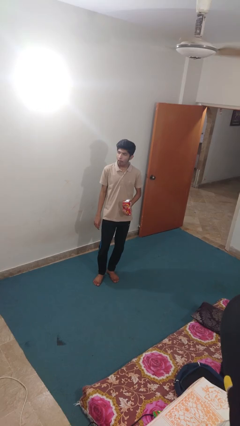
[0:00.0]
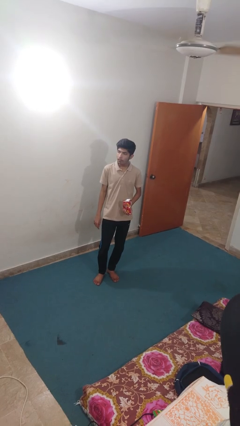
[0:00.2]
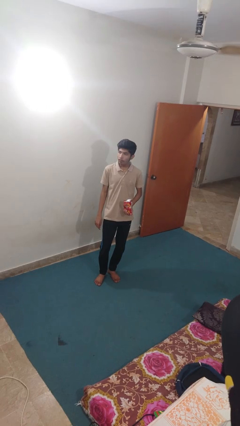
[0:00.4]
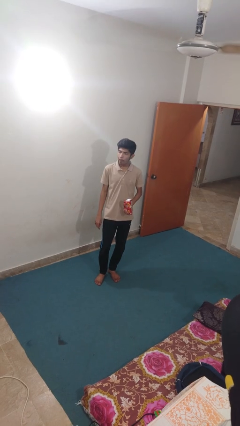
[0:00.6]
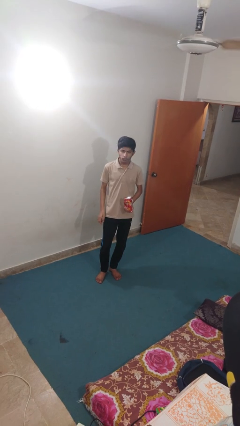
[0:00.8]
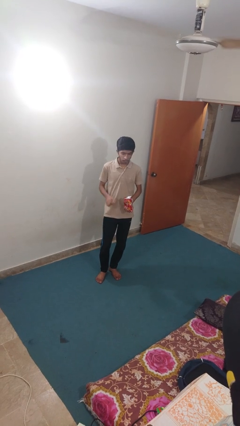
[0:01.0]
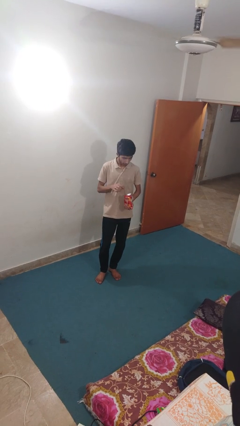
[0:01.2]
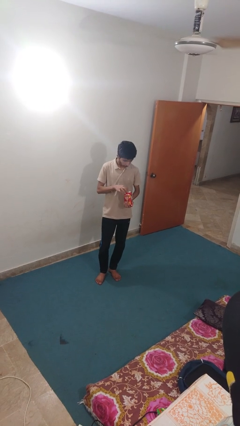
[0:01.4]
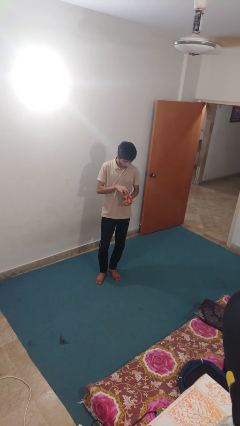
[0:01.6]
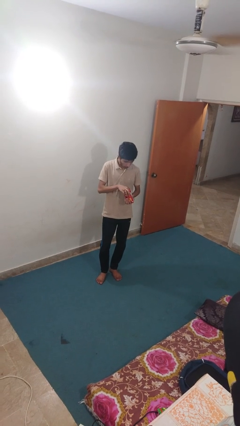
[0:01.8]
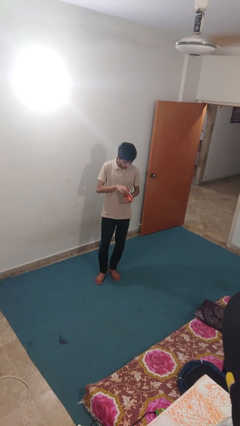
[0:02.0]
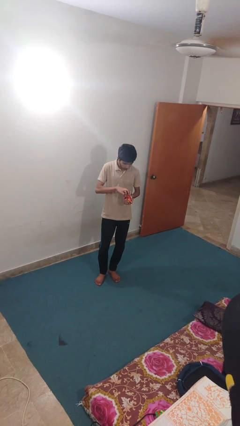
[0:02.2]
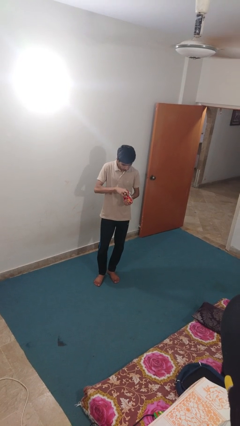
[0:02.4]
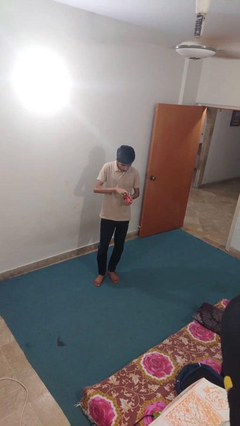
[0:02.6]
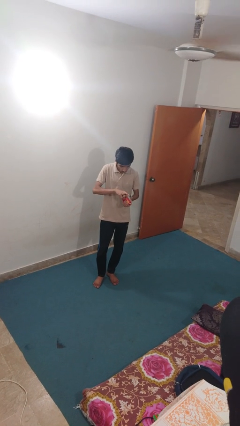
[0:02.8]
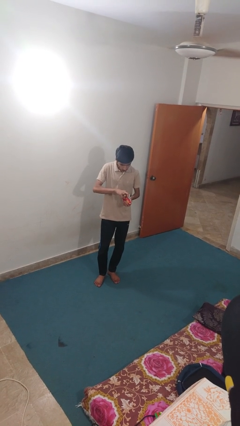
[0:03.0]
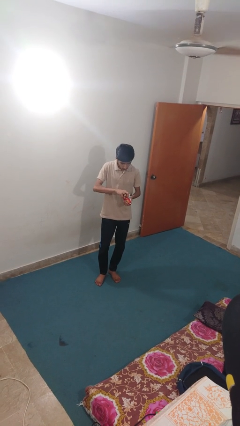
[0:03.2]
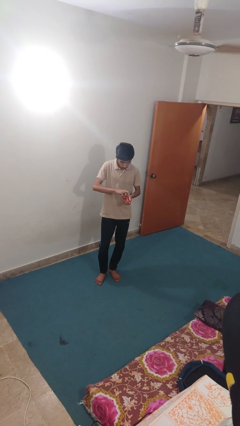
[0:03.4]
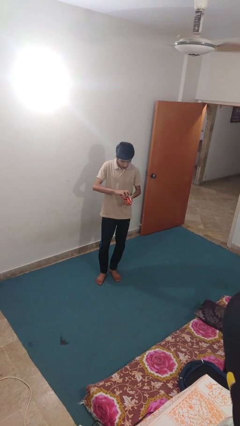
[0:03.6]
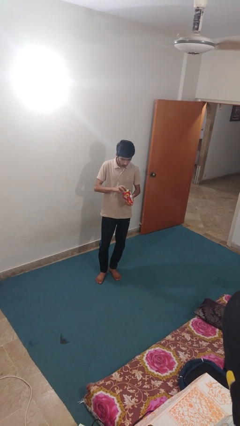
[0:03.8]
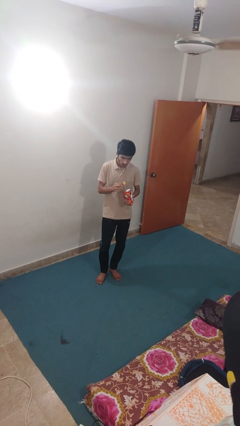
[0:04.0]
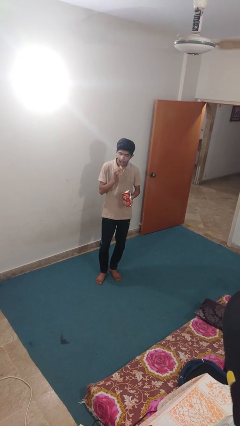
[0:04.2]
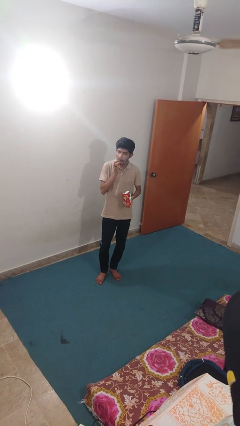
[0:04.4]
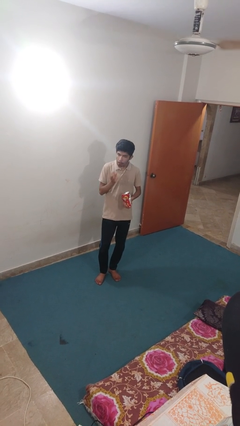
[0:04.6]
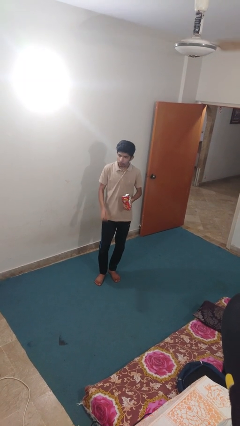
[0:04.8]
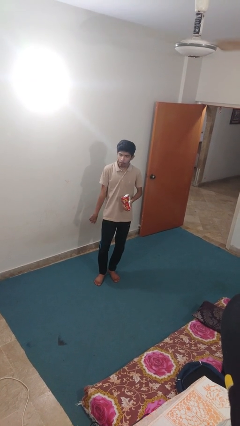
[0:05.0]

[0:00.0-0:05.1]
person eats snack from bag

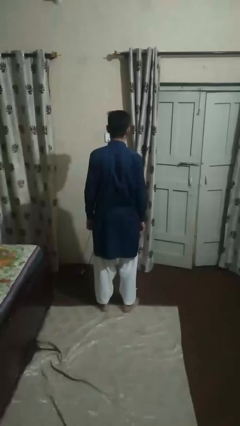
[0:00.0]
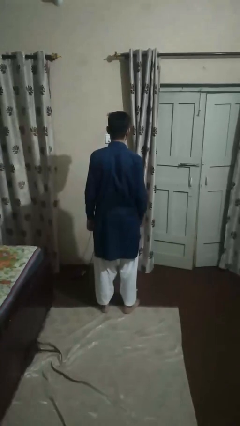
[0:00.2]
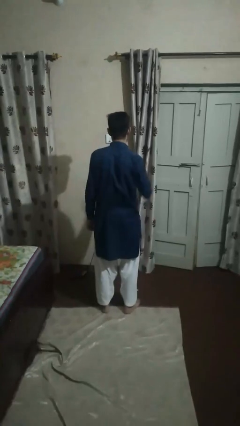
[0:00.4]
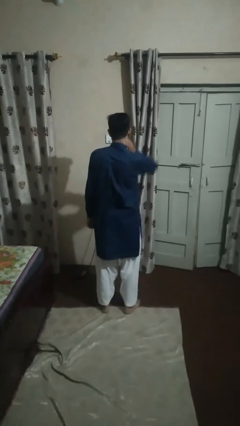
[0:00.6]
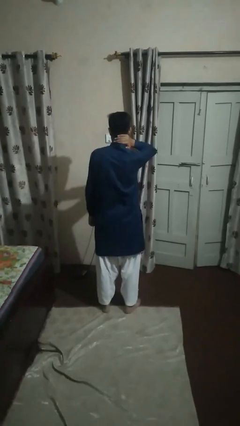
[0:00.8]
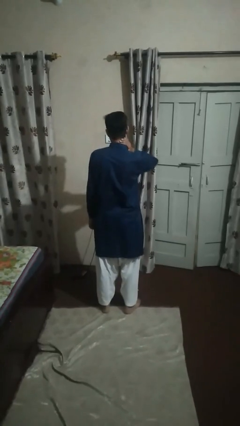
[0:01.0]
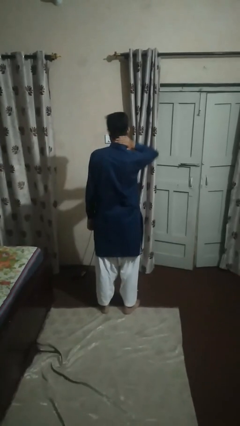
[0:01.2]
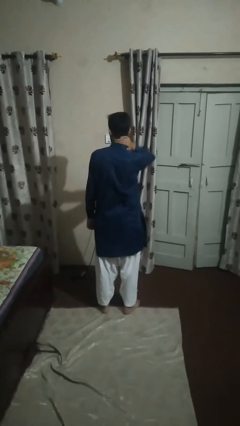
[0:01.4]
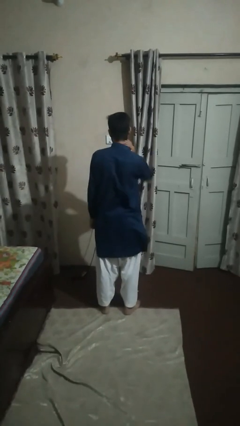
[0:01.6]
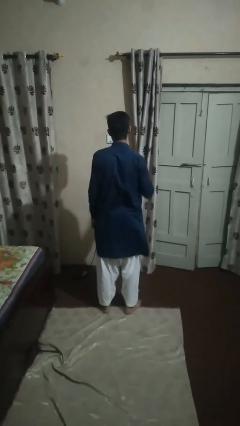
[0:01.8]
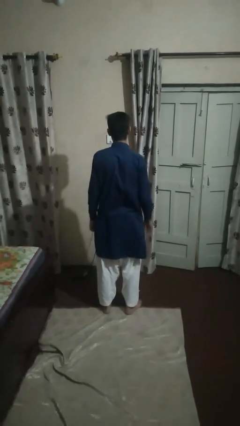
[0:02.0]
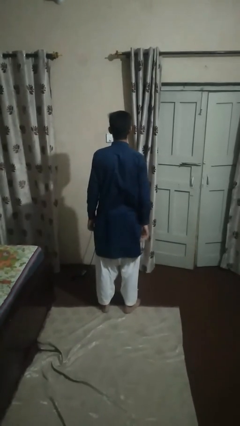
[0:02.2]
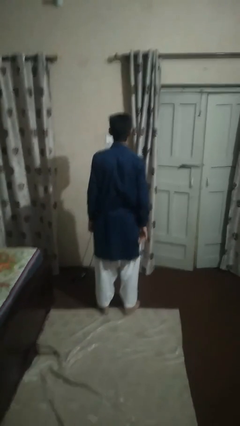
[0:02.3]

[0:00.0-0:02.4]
person rubs neck

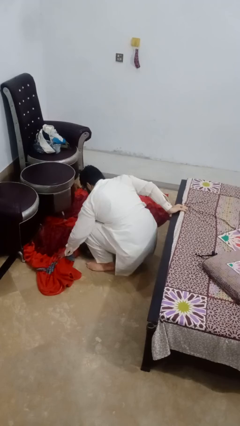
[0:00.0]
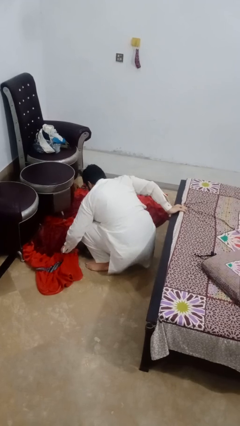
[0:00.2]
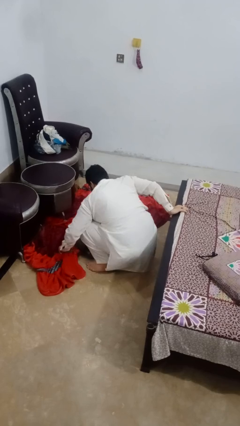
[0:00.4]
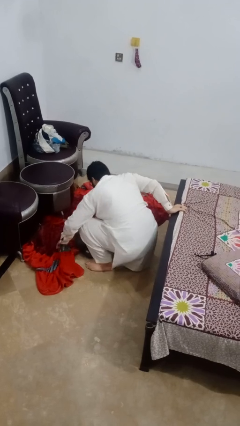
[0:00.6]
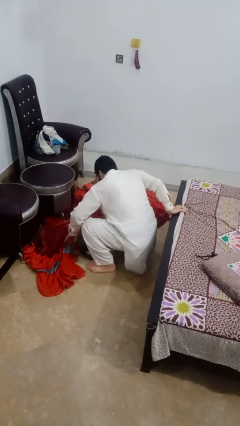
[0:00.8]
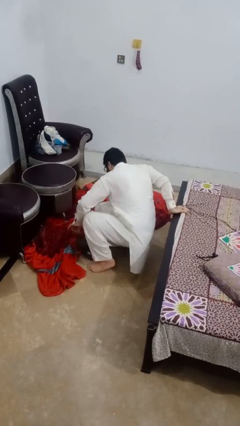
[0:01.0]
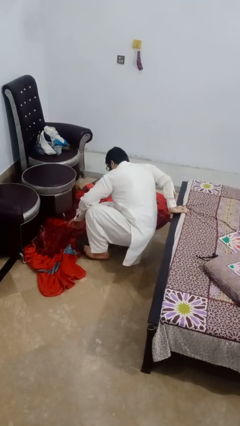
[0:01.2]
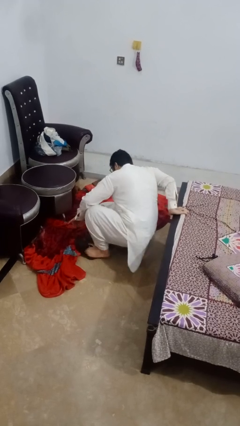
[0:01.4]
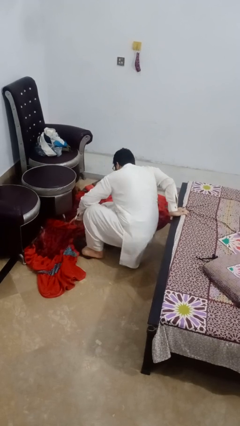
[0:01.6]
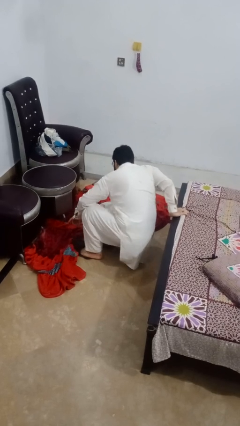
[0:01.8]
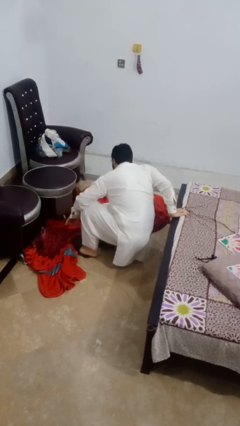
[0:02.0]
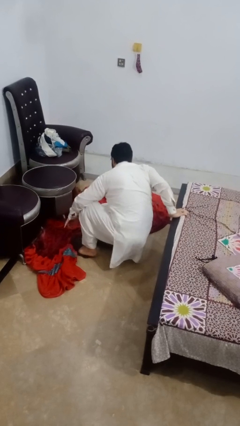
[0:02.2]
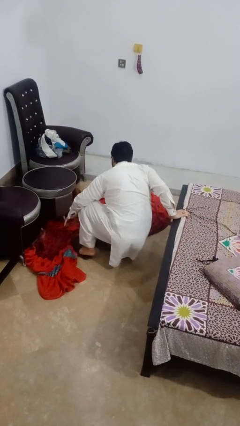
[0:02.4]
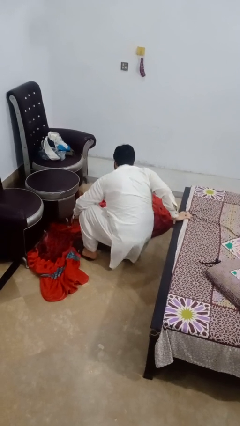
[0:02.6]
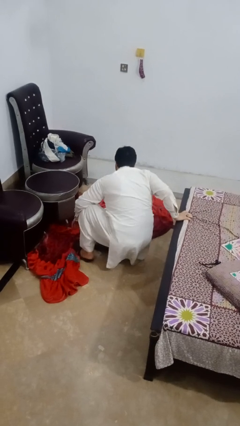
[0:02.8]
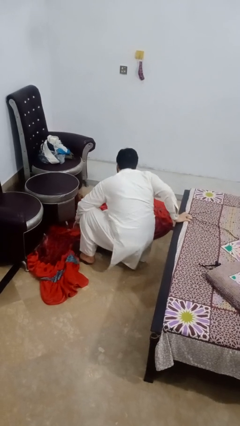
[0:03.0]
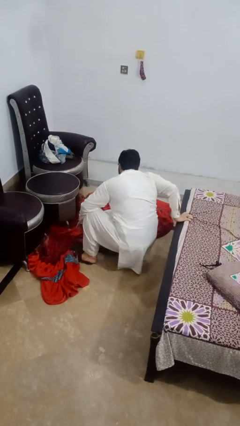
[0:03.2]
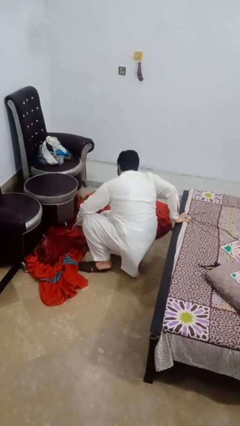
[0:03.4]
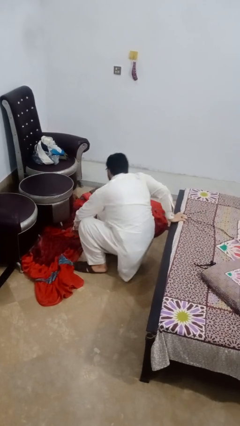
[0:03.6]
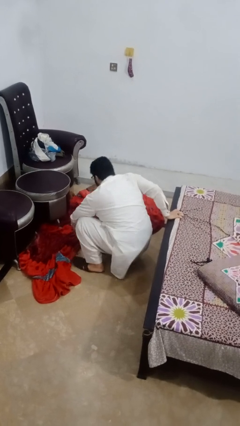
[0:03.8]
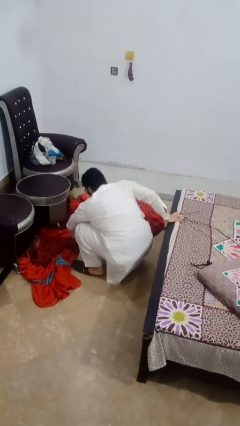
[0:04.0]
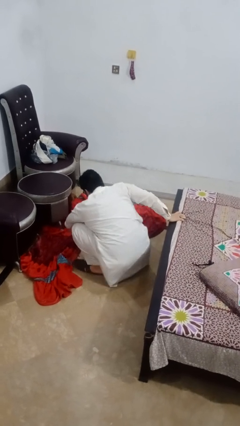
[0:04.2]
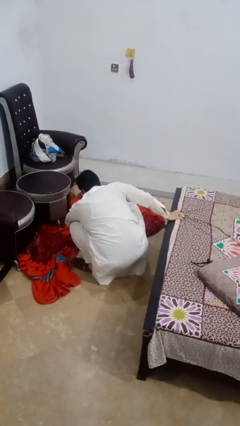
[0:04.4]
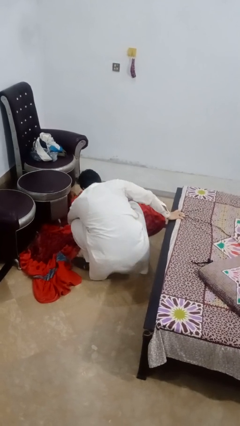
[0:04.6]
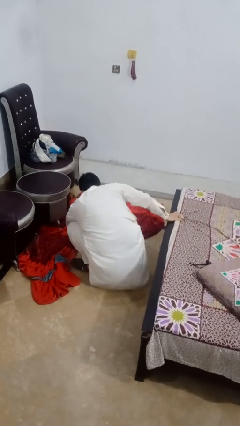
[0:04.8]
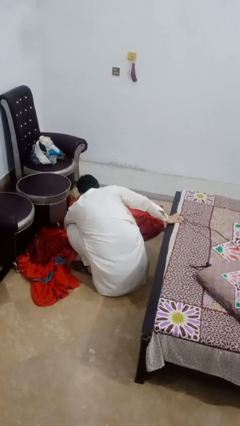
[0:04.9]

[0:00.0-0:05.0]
person puts on shoes

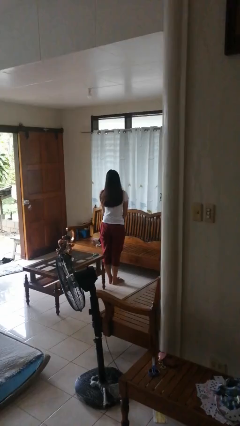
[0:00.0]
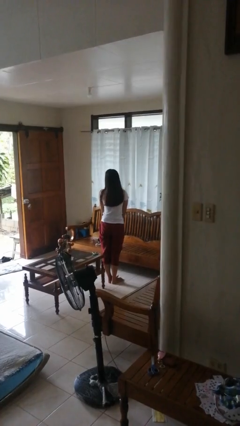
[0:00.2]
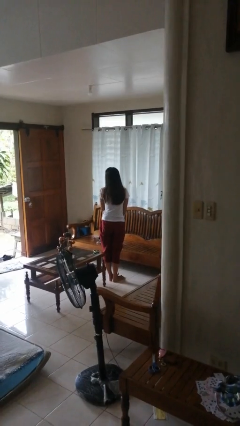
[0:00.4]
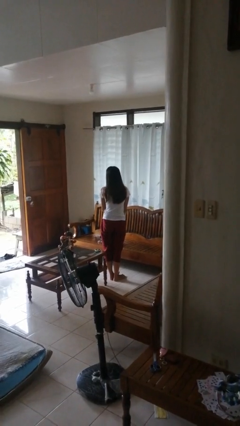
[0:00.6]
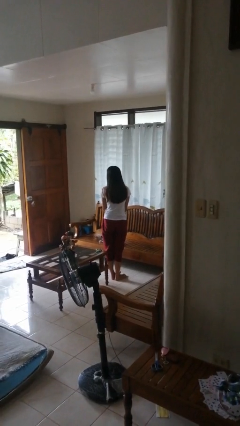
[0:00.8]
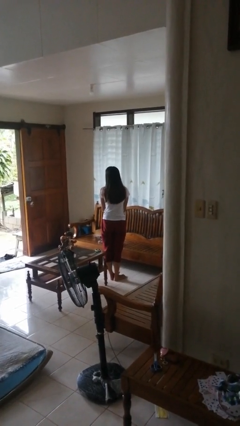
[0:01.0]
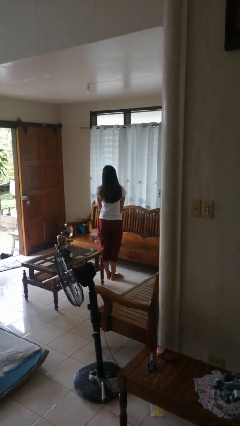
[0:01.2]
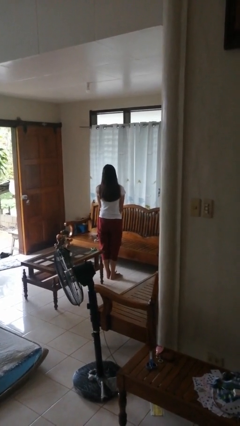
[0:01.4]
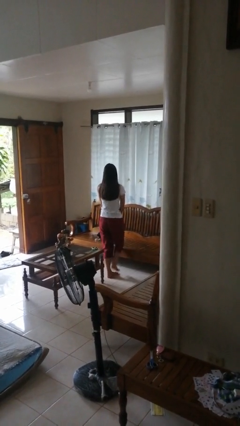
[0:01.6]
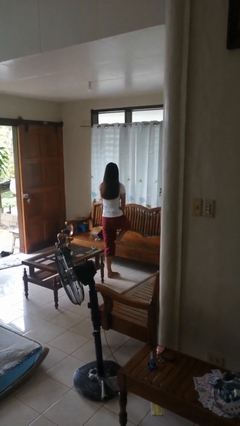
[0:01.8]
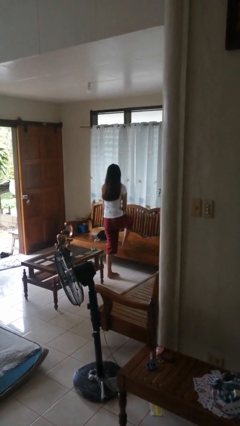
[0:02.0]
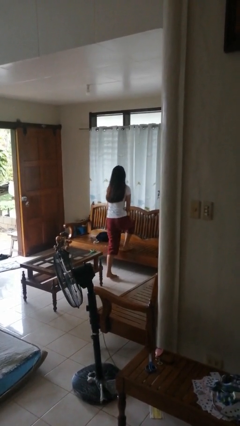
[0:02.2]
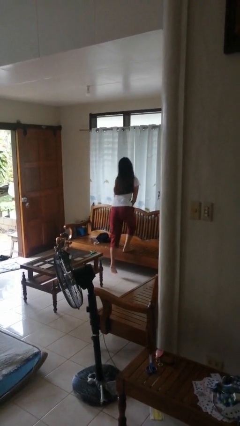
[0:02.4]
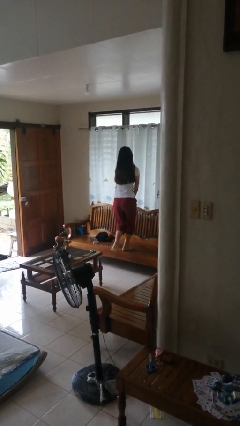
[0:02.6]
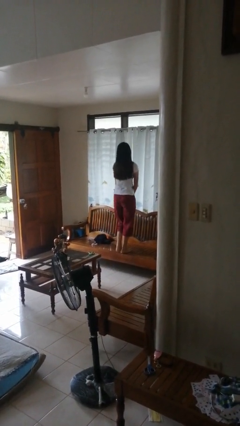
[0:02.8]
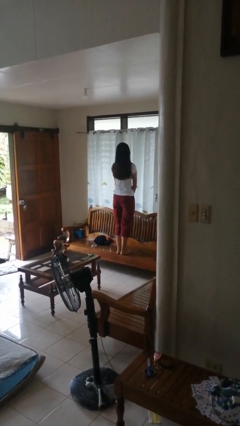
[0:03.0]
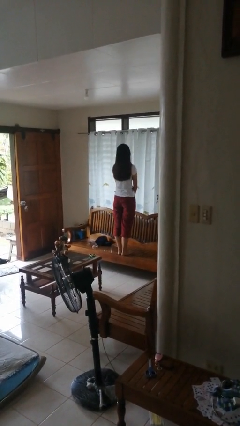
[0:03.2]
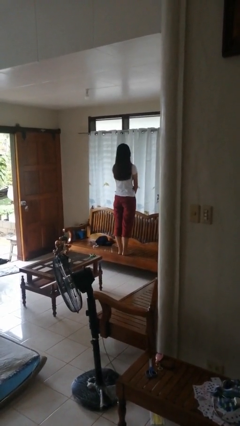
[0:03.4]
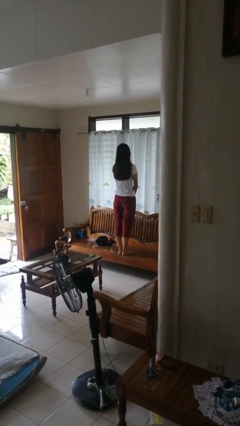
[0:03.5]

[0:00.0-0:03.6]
person climbs on chair

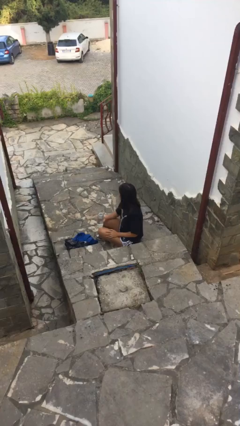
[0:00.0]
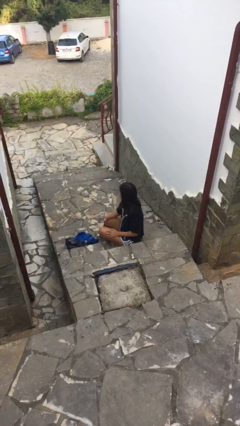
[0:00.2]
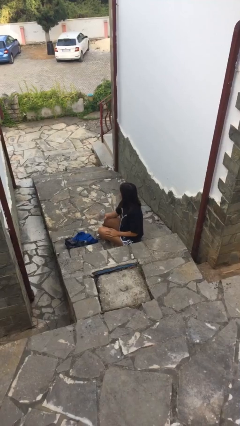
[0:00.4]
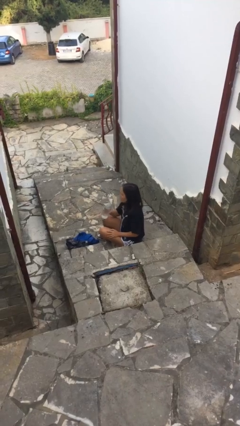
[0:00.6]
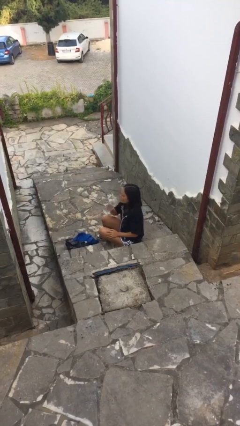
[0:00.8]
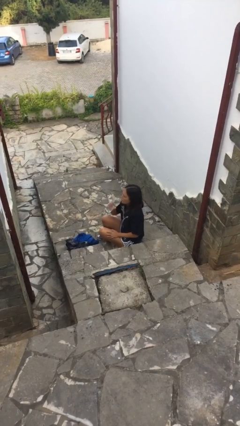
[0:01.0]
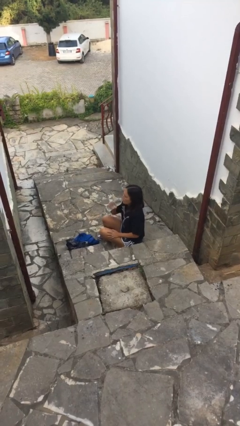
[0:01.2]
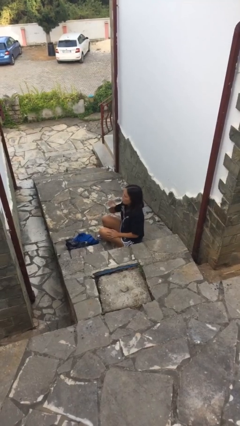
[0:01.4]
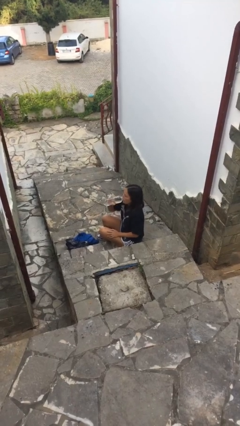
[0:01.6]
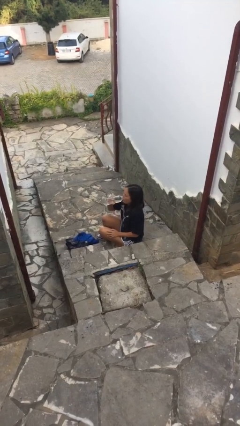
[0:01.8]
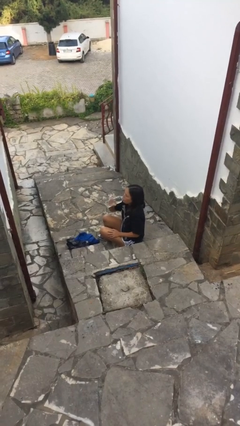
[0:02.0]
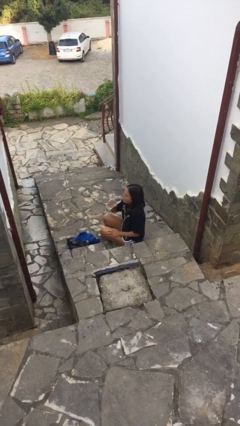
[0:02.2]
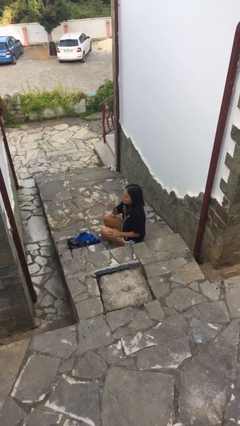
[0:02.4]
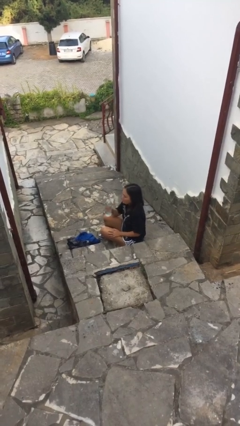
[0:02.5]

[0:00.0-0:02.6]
person drinks from bottle
